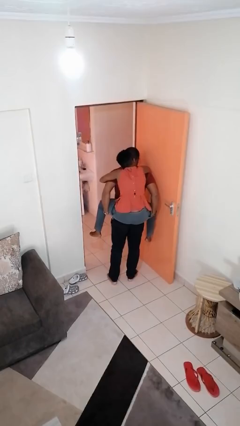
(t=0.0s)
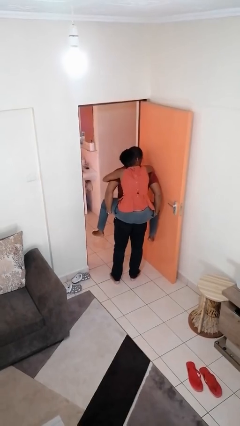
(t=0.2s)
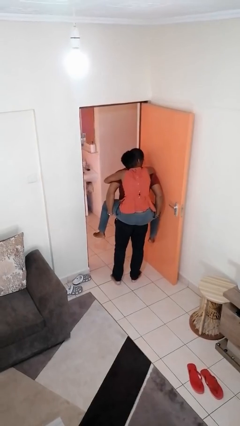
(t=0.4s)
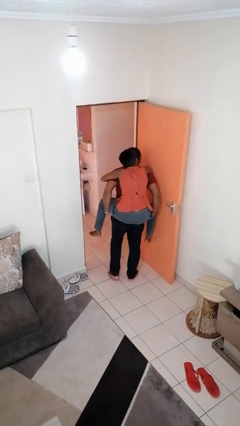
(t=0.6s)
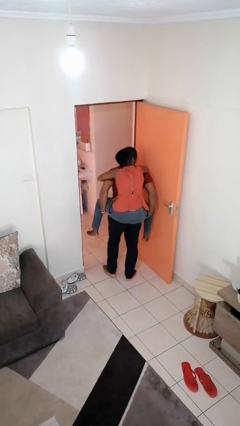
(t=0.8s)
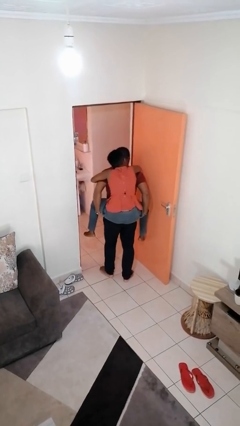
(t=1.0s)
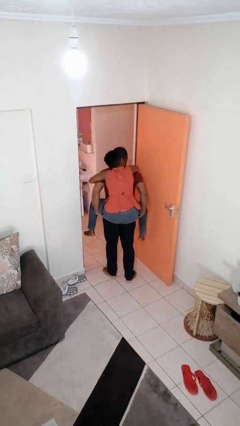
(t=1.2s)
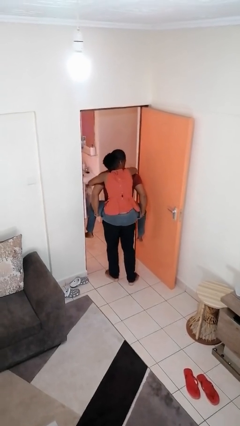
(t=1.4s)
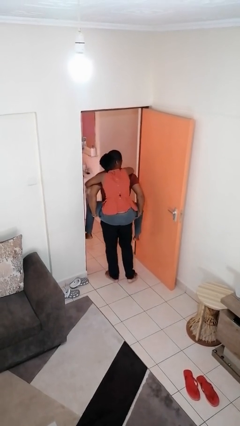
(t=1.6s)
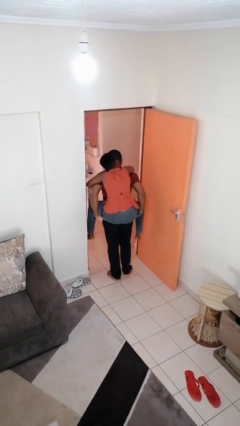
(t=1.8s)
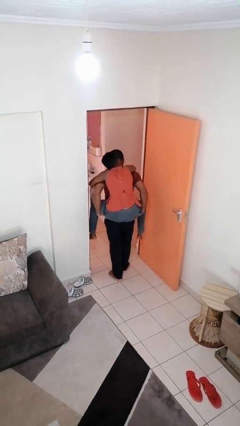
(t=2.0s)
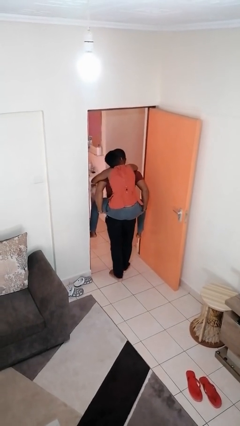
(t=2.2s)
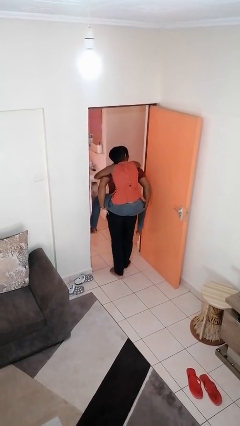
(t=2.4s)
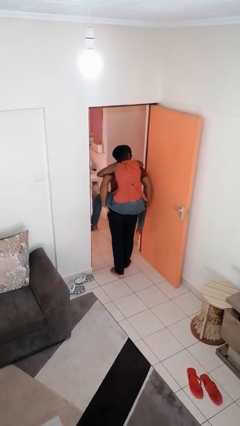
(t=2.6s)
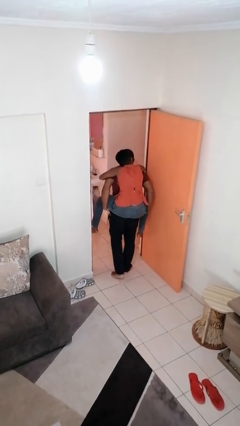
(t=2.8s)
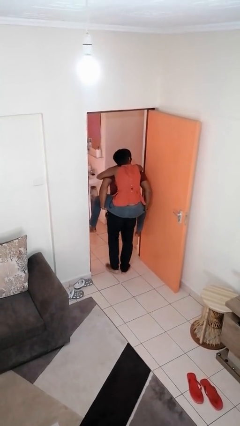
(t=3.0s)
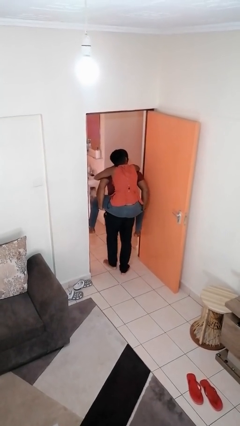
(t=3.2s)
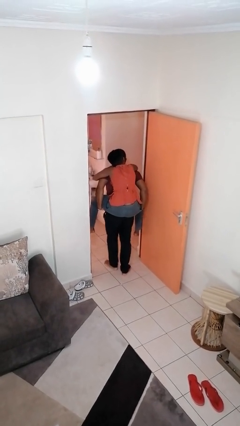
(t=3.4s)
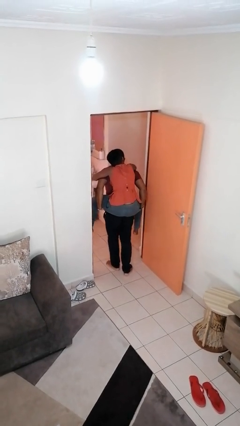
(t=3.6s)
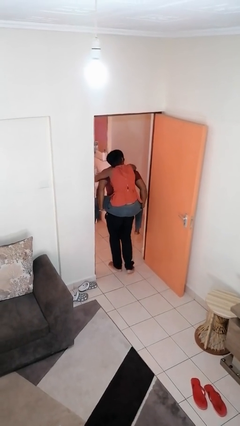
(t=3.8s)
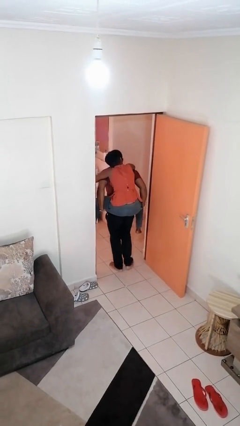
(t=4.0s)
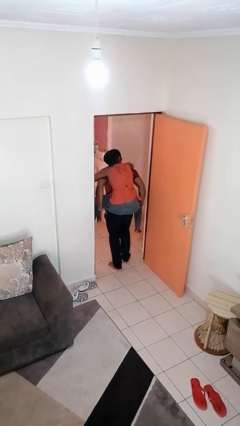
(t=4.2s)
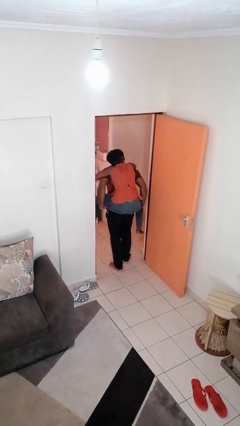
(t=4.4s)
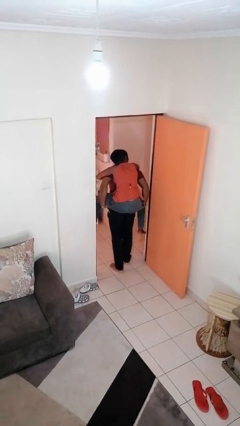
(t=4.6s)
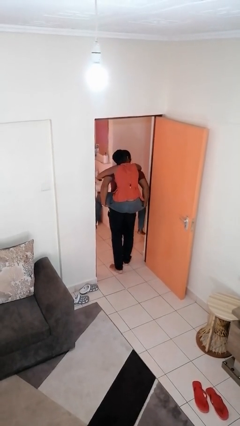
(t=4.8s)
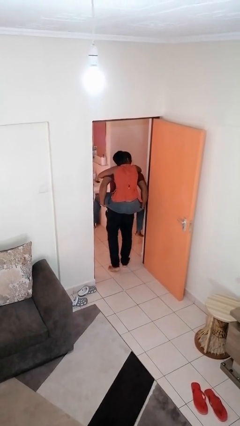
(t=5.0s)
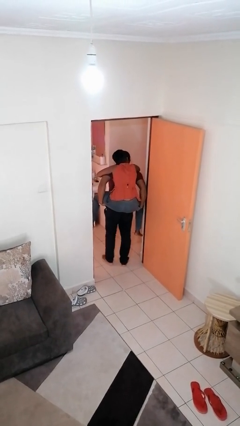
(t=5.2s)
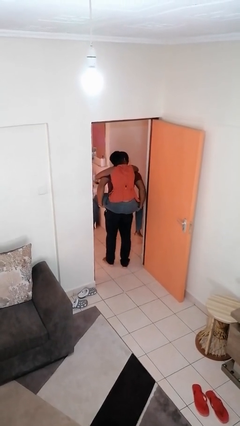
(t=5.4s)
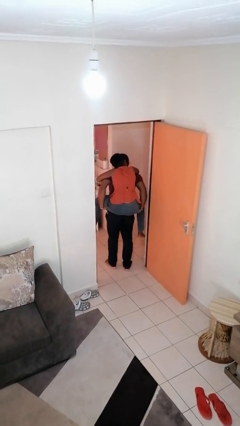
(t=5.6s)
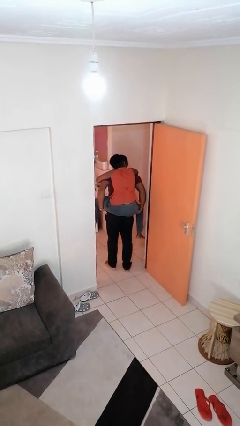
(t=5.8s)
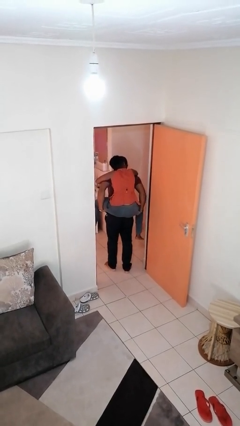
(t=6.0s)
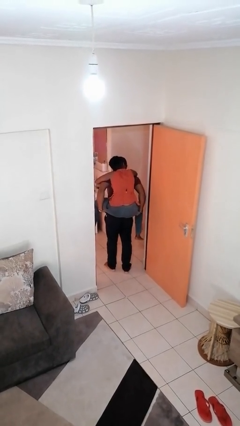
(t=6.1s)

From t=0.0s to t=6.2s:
person carries person on back

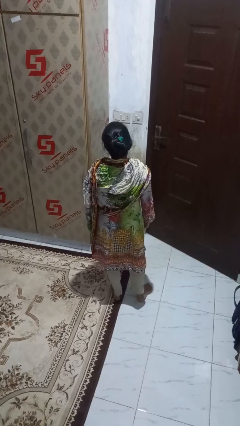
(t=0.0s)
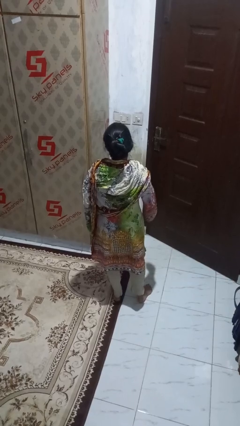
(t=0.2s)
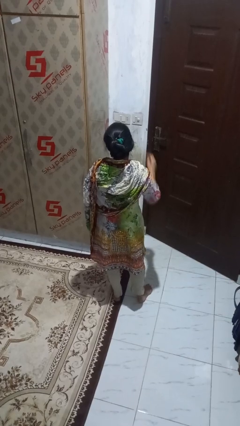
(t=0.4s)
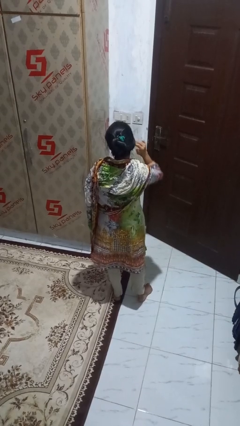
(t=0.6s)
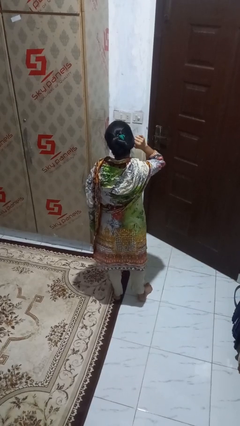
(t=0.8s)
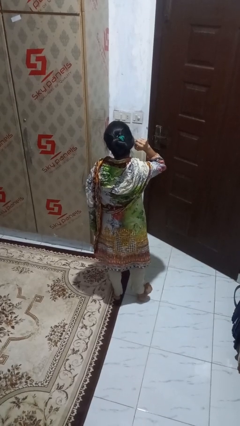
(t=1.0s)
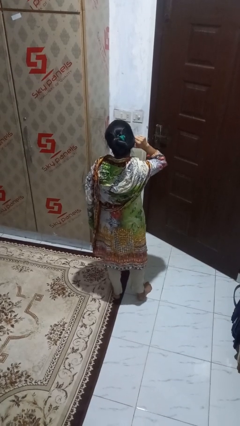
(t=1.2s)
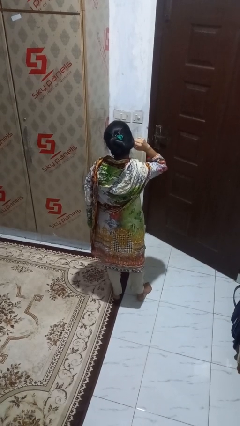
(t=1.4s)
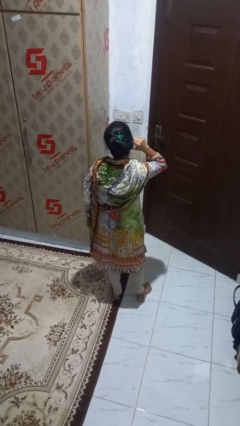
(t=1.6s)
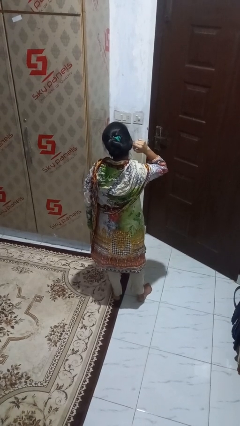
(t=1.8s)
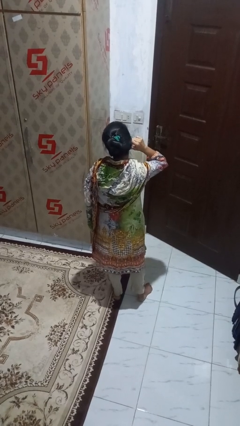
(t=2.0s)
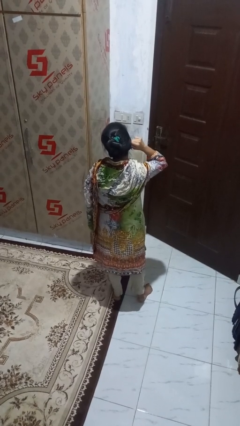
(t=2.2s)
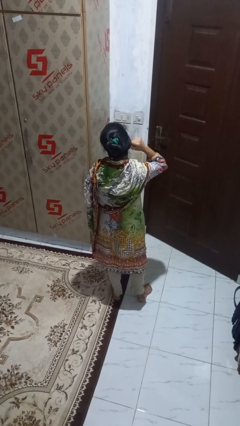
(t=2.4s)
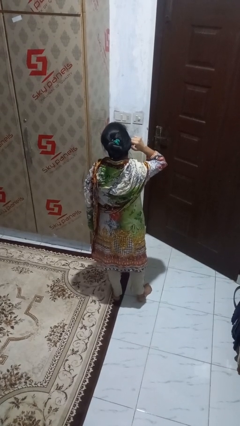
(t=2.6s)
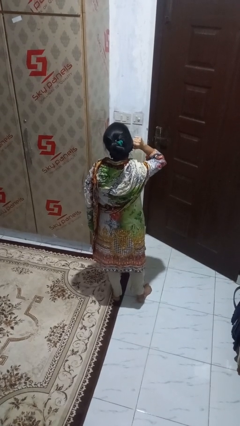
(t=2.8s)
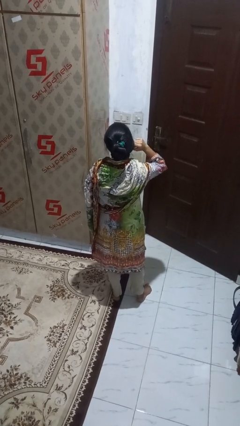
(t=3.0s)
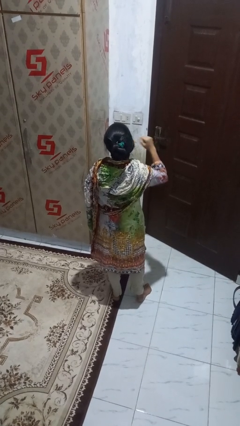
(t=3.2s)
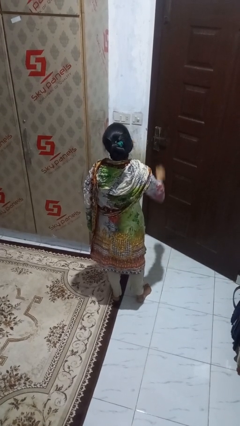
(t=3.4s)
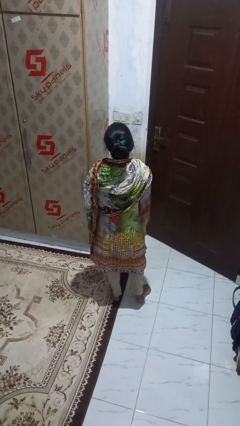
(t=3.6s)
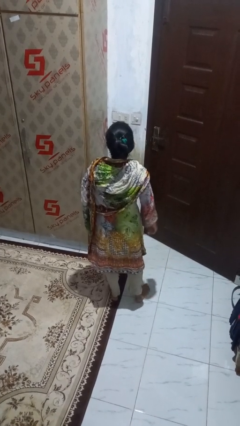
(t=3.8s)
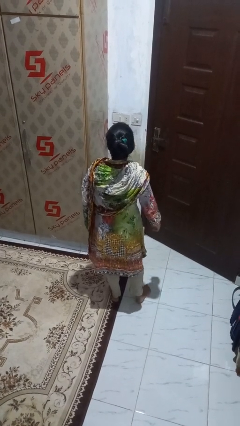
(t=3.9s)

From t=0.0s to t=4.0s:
person touches earlobe

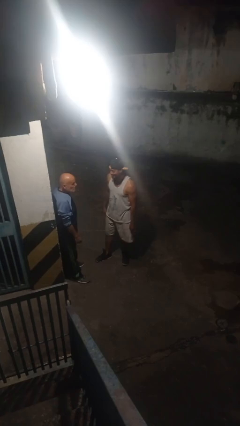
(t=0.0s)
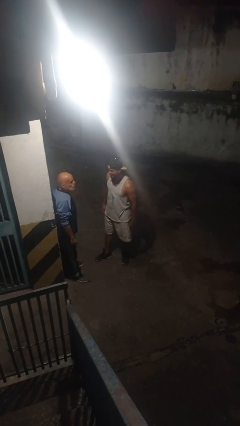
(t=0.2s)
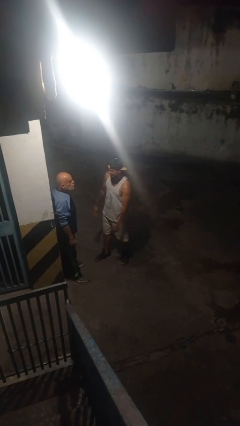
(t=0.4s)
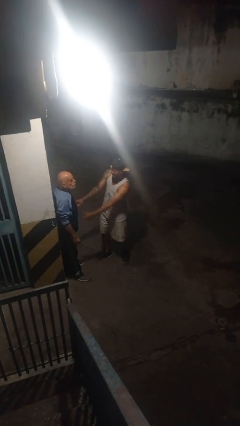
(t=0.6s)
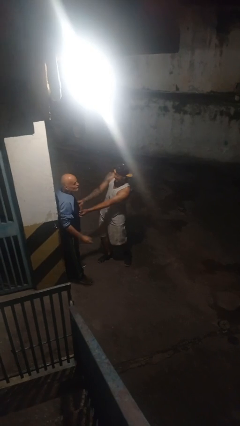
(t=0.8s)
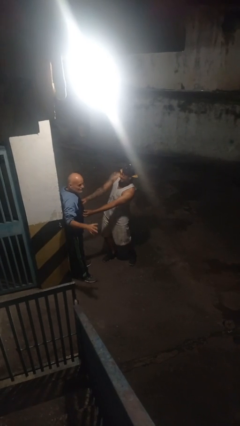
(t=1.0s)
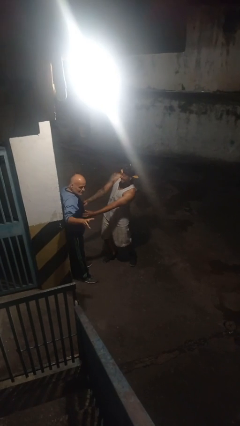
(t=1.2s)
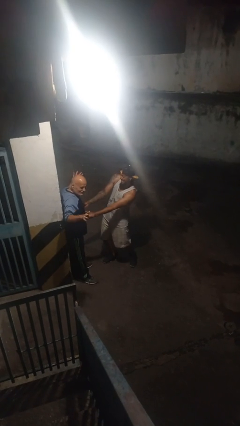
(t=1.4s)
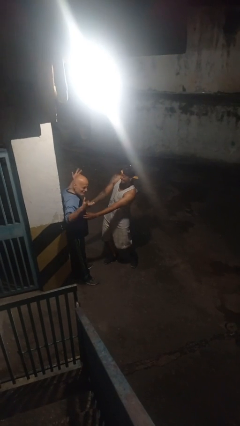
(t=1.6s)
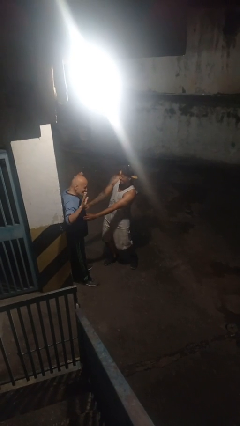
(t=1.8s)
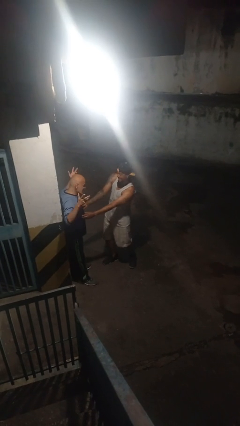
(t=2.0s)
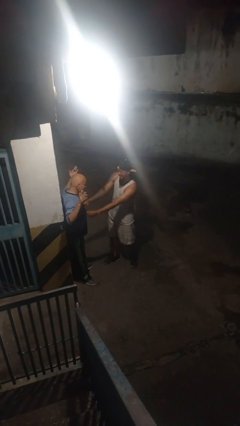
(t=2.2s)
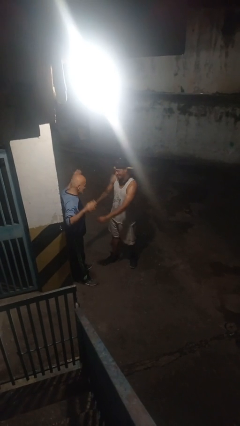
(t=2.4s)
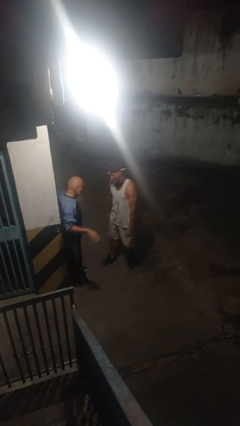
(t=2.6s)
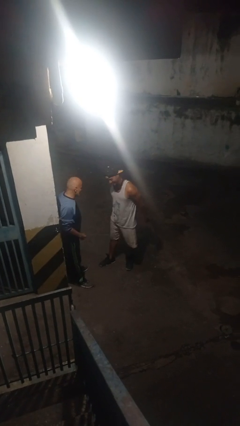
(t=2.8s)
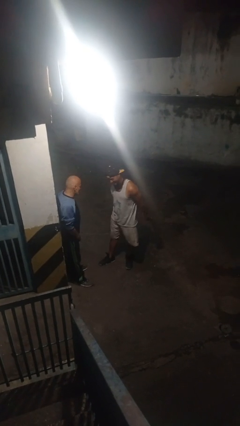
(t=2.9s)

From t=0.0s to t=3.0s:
person tickles person

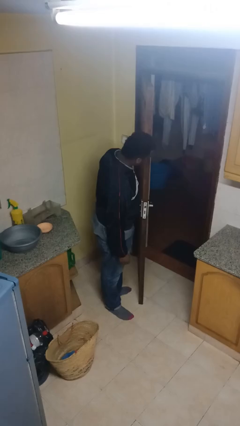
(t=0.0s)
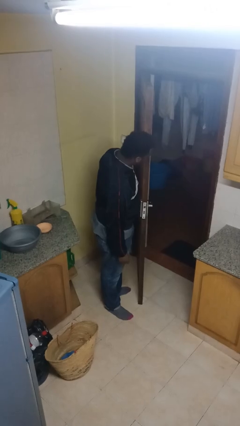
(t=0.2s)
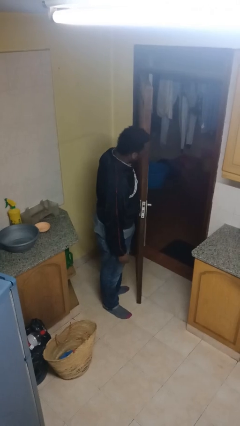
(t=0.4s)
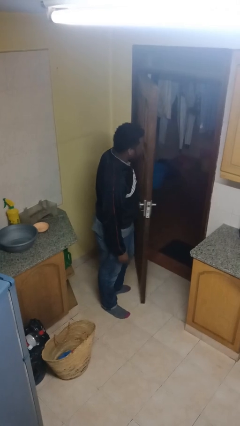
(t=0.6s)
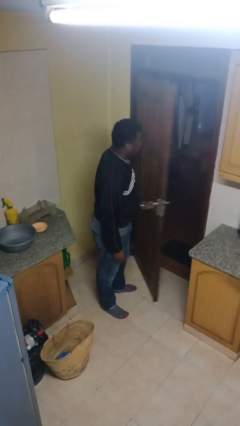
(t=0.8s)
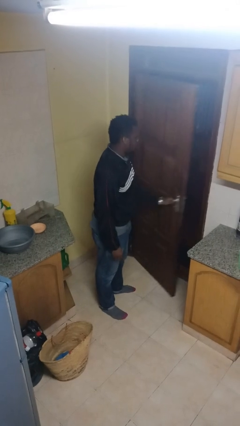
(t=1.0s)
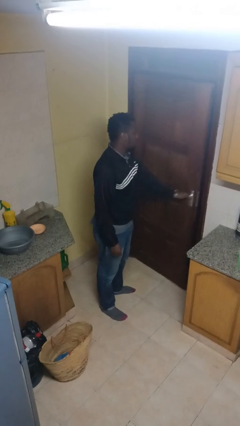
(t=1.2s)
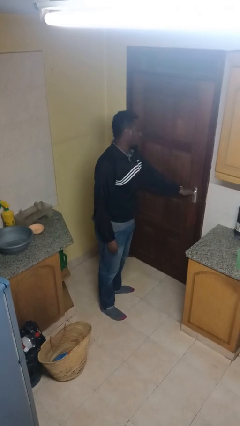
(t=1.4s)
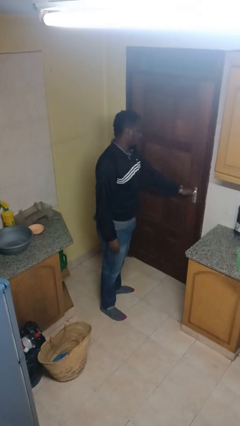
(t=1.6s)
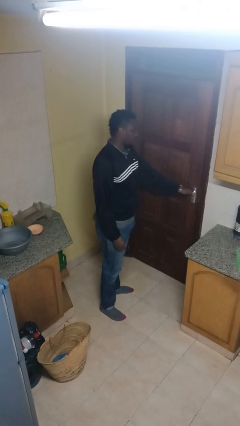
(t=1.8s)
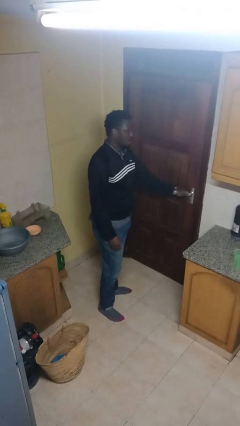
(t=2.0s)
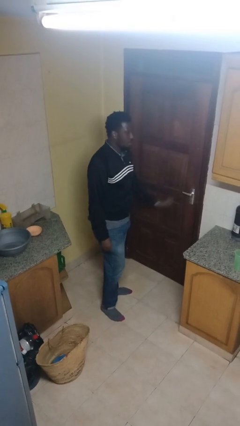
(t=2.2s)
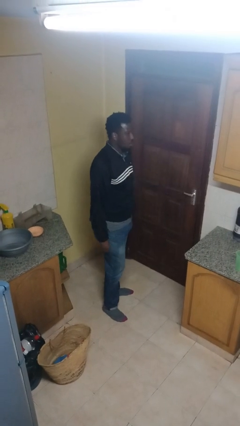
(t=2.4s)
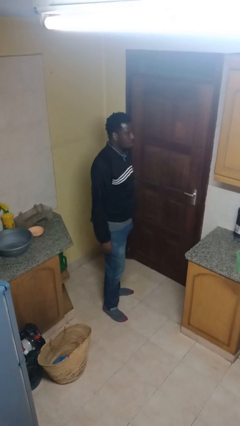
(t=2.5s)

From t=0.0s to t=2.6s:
person closes facility door

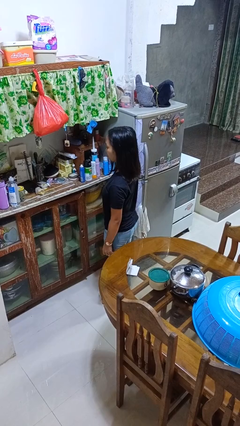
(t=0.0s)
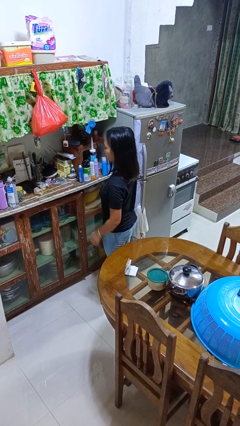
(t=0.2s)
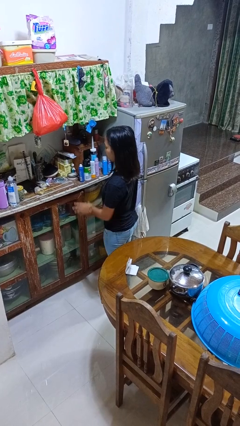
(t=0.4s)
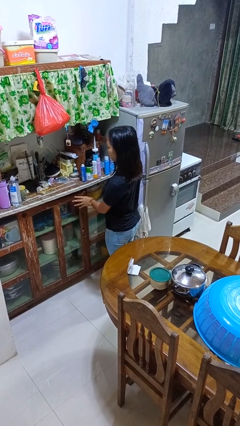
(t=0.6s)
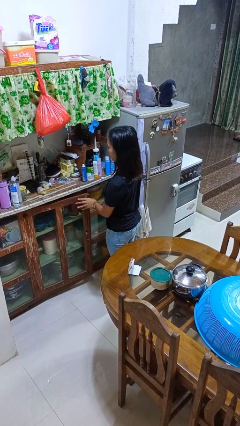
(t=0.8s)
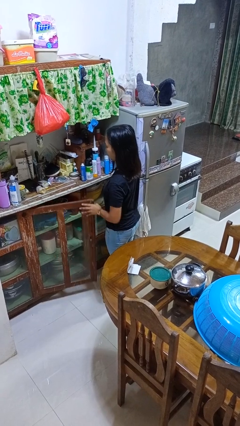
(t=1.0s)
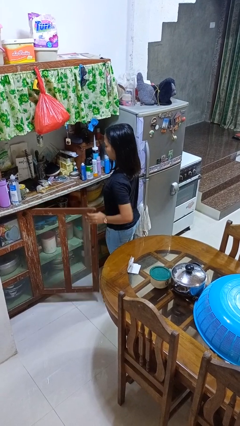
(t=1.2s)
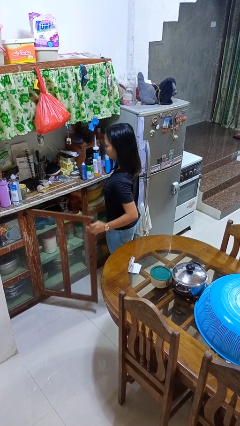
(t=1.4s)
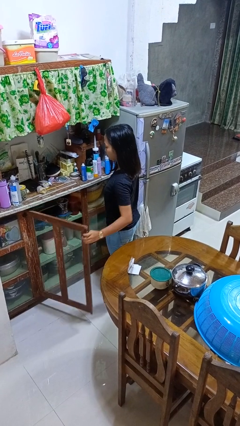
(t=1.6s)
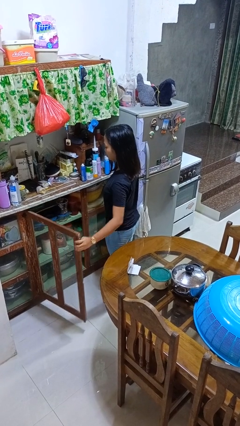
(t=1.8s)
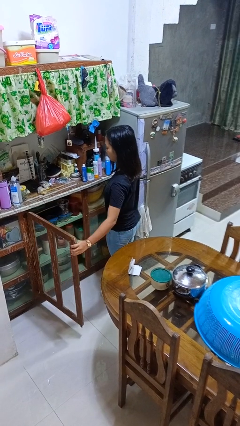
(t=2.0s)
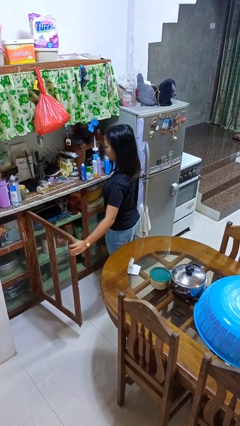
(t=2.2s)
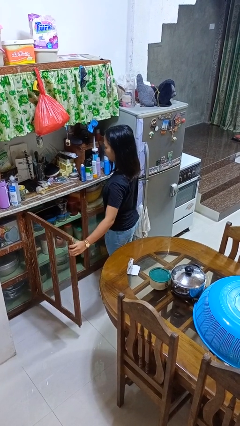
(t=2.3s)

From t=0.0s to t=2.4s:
person opens cabinet
